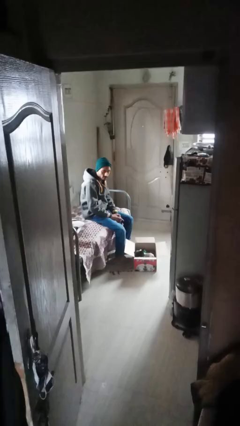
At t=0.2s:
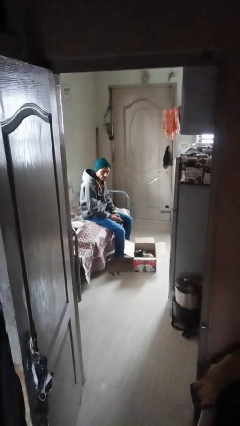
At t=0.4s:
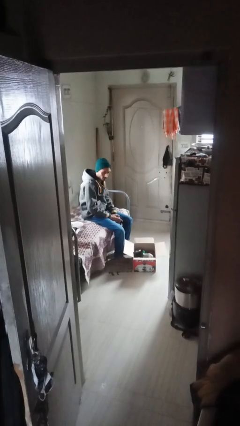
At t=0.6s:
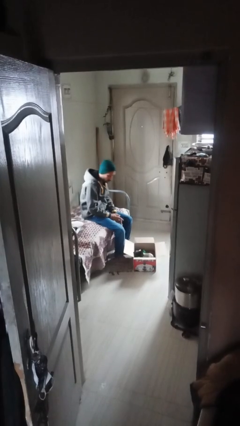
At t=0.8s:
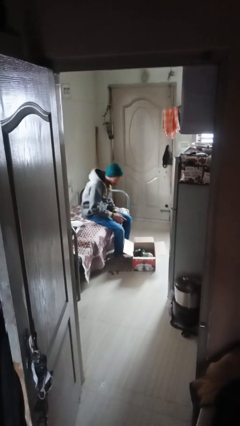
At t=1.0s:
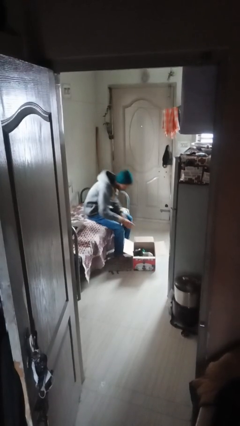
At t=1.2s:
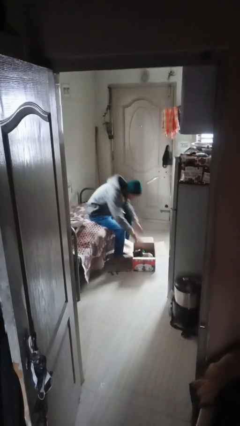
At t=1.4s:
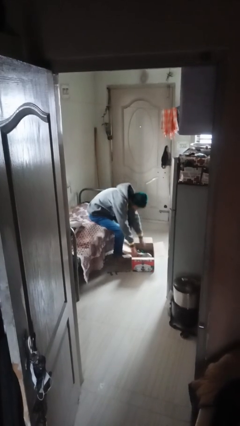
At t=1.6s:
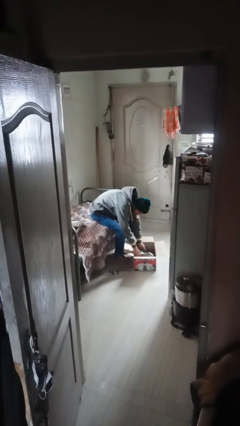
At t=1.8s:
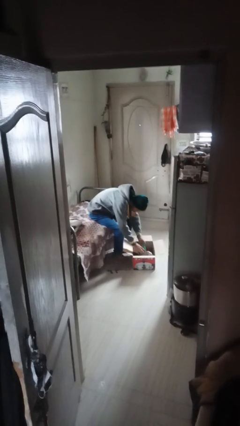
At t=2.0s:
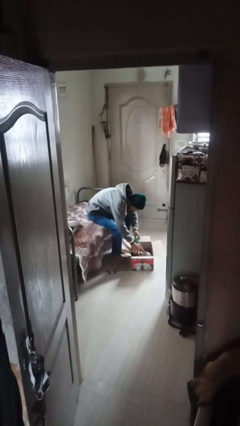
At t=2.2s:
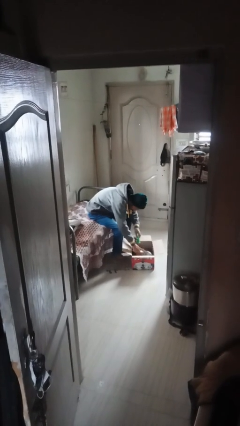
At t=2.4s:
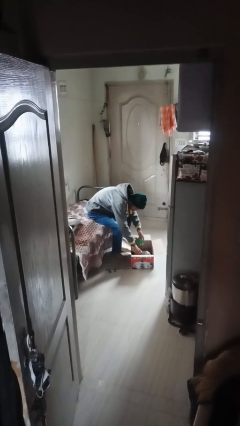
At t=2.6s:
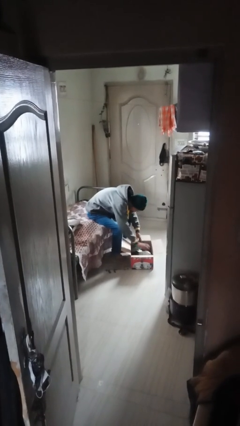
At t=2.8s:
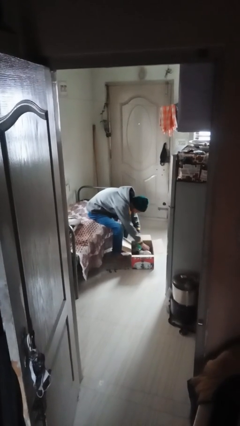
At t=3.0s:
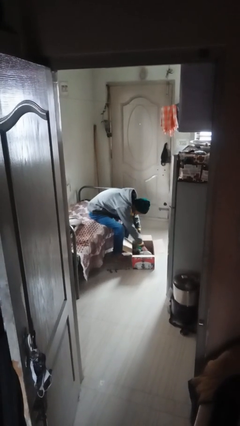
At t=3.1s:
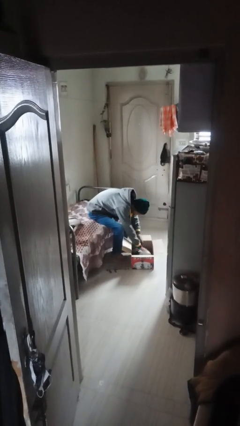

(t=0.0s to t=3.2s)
person searches in box

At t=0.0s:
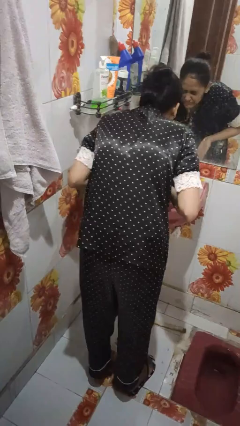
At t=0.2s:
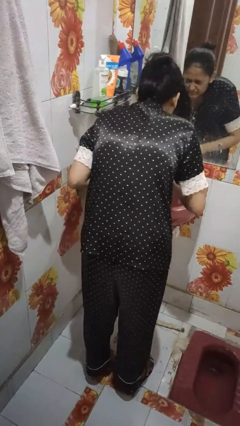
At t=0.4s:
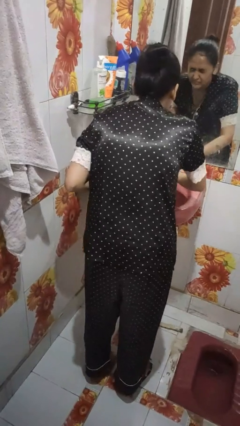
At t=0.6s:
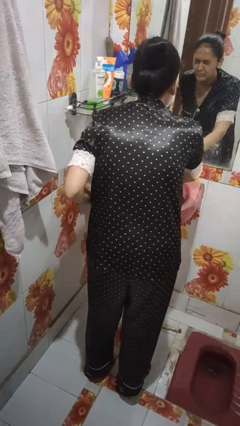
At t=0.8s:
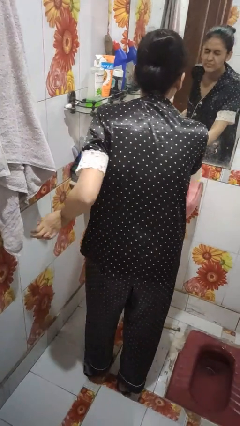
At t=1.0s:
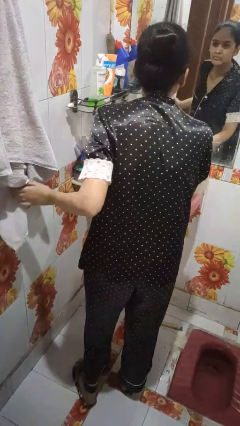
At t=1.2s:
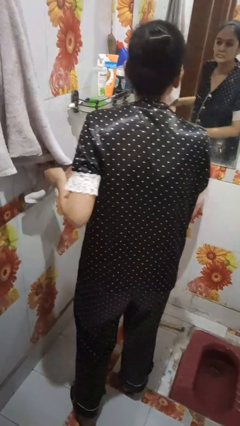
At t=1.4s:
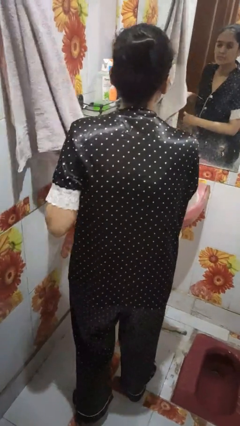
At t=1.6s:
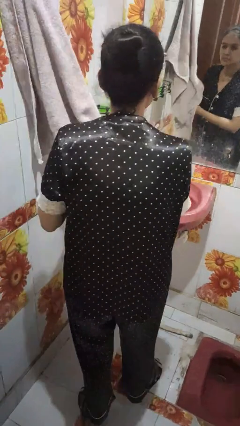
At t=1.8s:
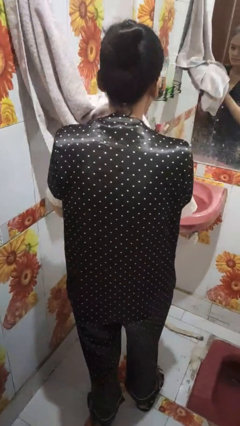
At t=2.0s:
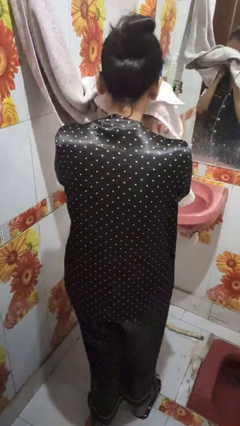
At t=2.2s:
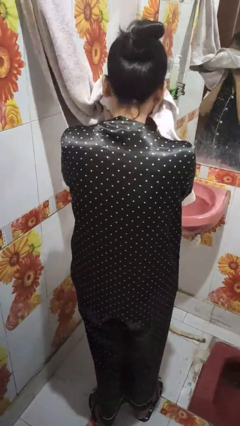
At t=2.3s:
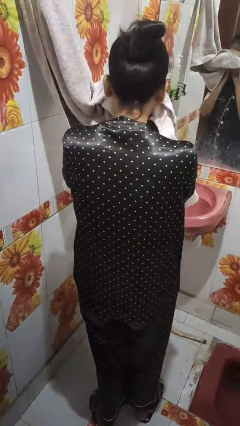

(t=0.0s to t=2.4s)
person washes face

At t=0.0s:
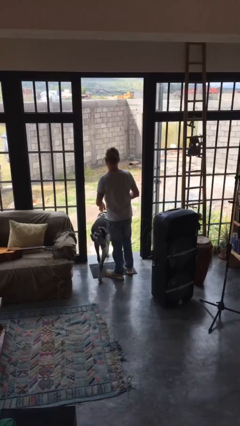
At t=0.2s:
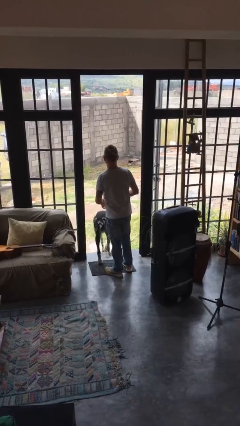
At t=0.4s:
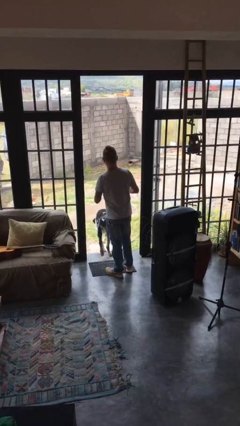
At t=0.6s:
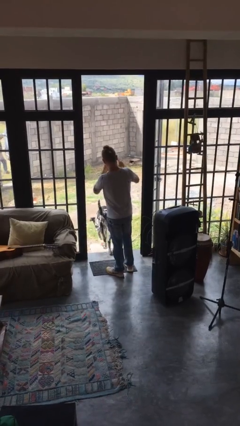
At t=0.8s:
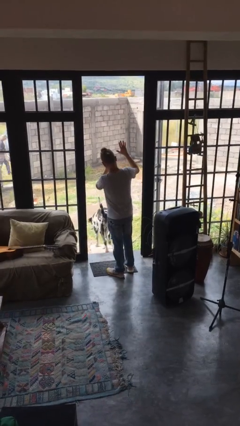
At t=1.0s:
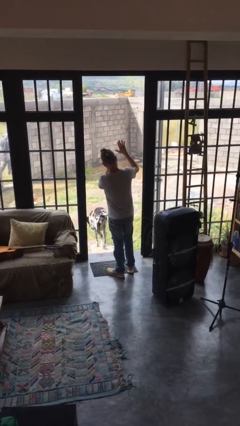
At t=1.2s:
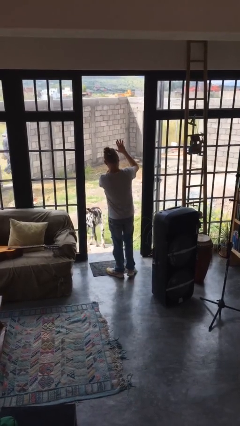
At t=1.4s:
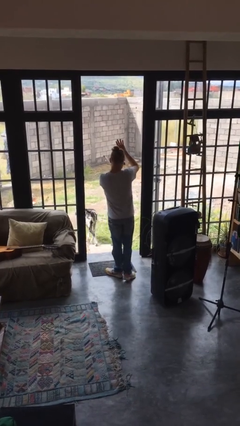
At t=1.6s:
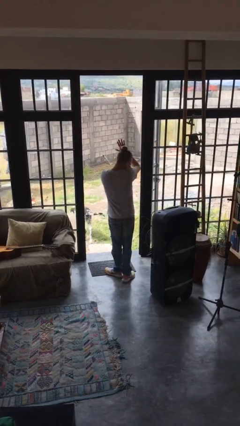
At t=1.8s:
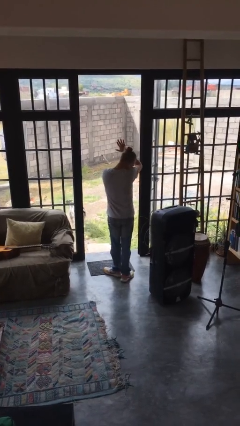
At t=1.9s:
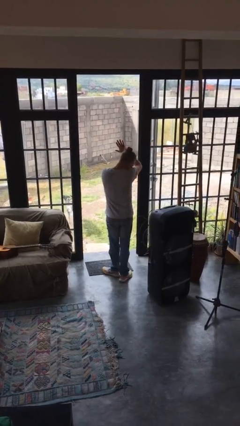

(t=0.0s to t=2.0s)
person shades eyes

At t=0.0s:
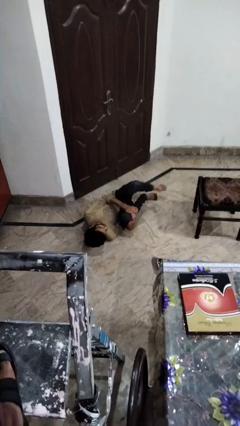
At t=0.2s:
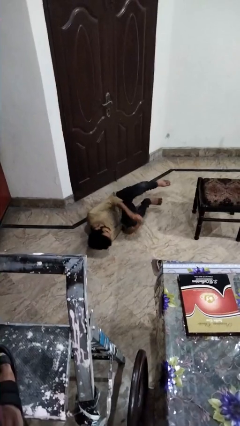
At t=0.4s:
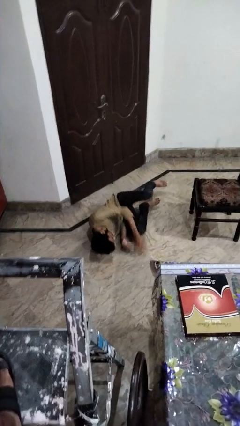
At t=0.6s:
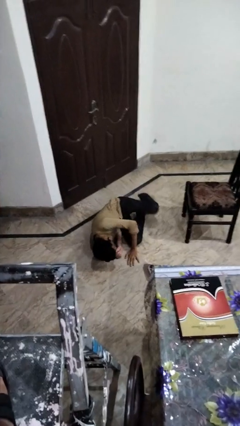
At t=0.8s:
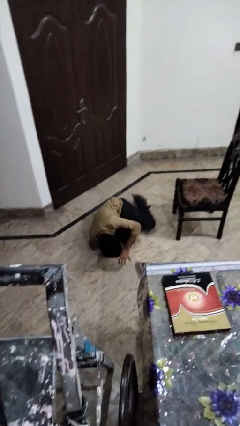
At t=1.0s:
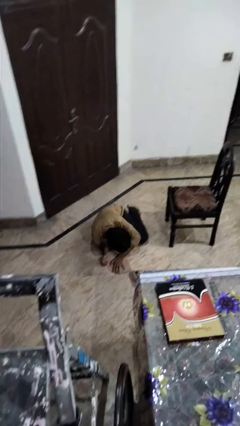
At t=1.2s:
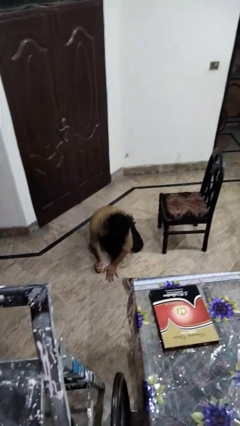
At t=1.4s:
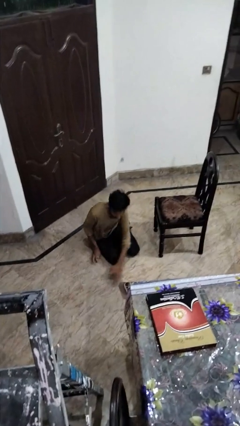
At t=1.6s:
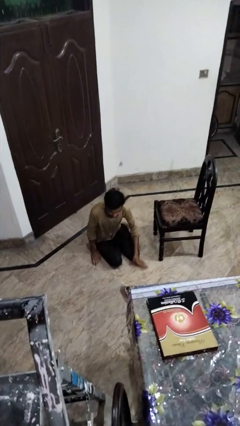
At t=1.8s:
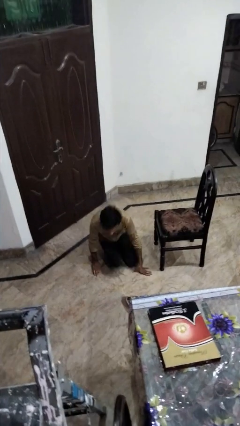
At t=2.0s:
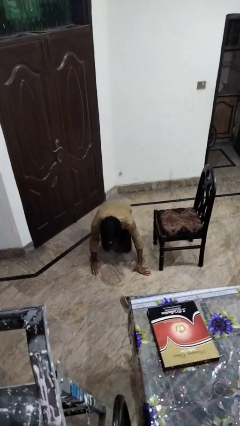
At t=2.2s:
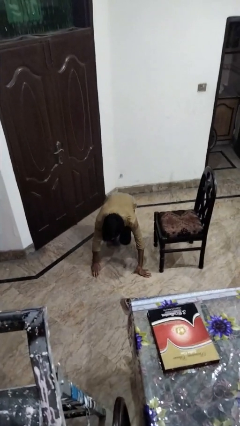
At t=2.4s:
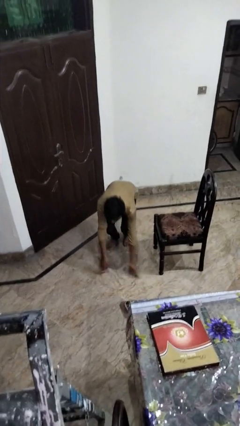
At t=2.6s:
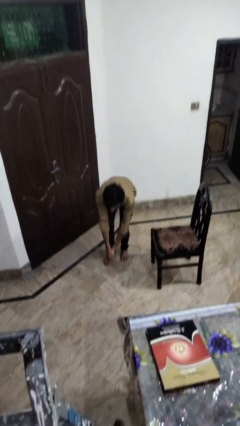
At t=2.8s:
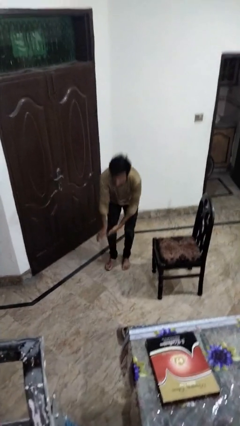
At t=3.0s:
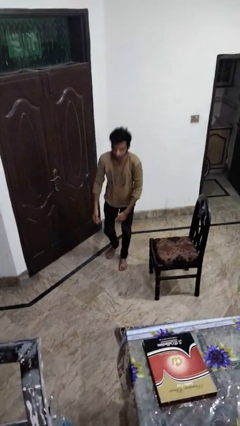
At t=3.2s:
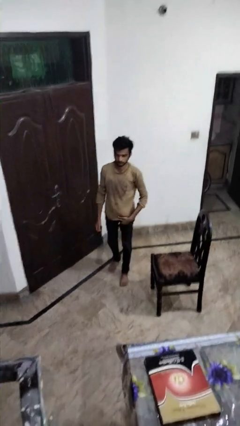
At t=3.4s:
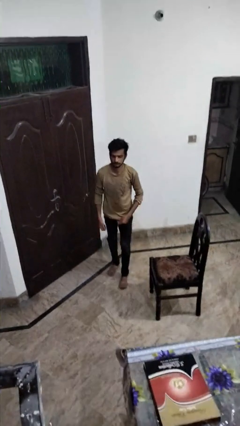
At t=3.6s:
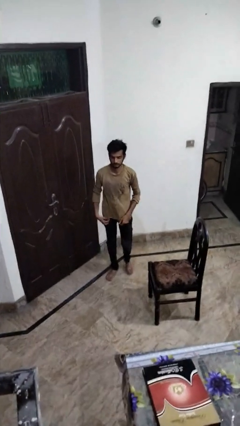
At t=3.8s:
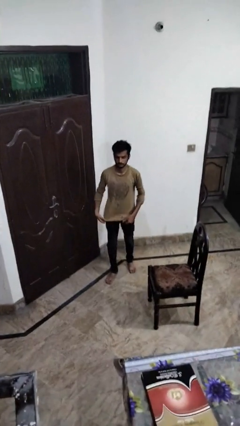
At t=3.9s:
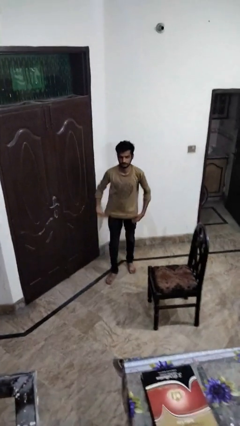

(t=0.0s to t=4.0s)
person stands up from floor

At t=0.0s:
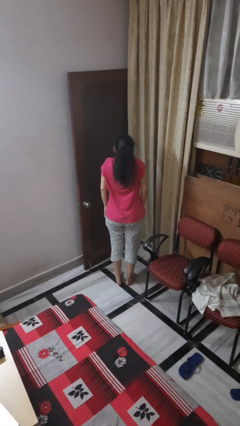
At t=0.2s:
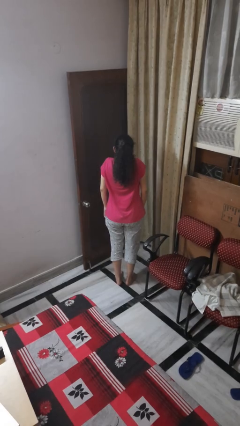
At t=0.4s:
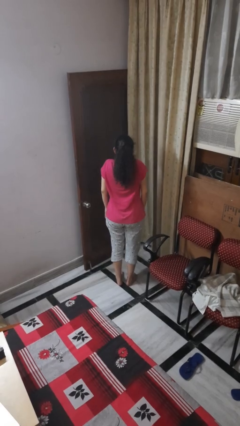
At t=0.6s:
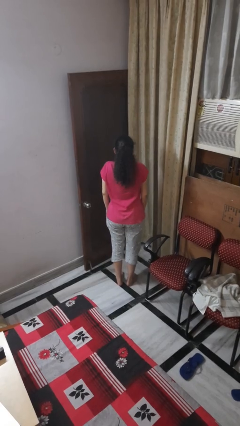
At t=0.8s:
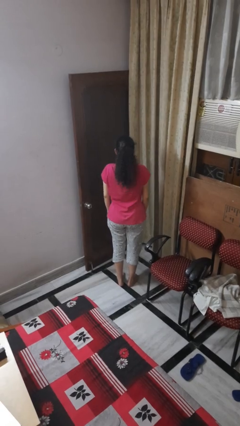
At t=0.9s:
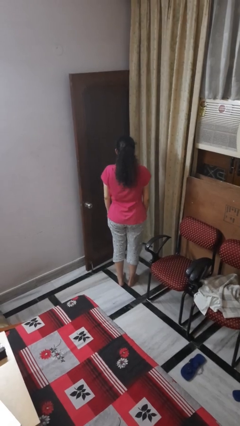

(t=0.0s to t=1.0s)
person shrugs

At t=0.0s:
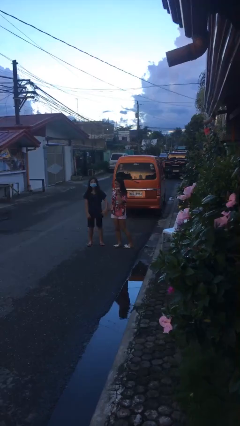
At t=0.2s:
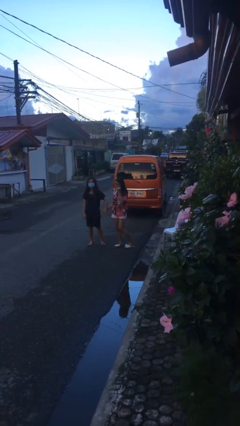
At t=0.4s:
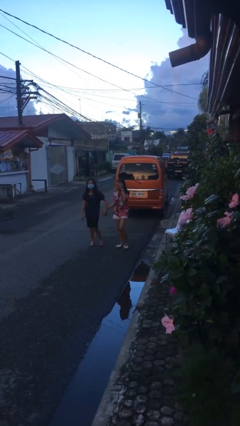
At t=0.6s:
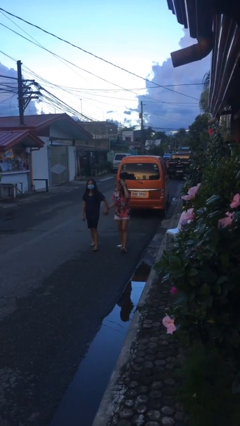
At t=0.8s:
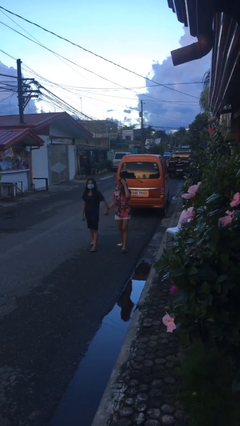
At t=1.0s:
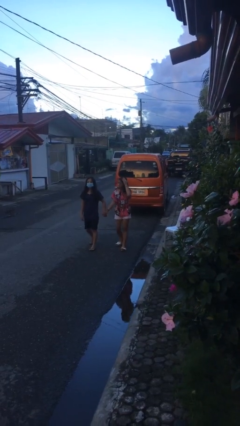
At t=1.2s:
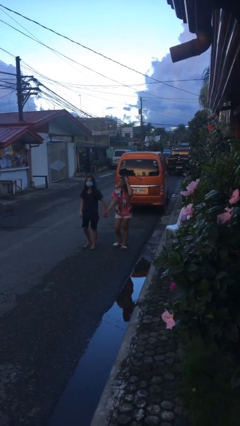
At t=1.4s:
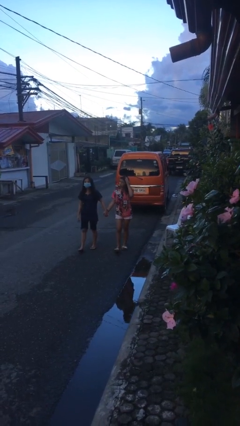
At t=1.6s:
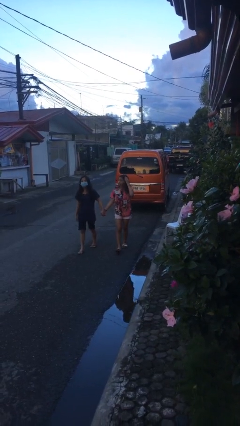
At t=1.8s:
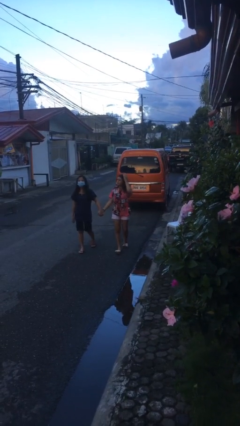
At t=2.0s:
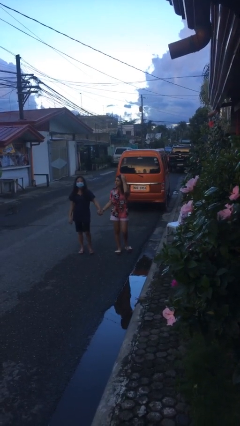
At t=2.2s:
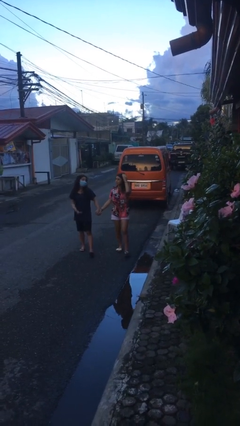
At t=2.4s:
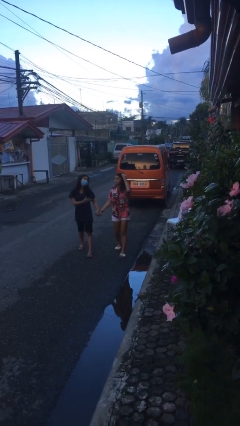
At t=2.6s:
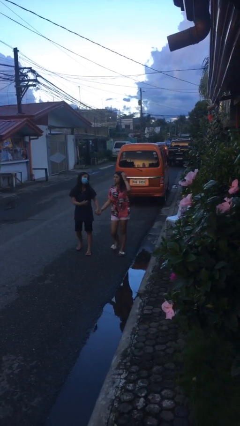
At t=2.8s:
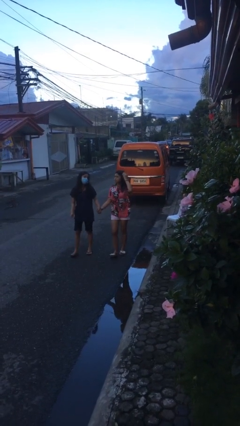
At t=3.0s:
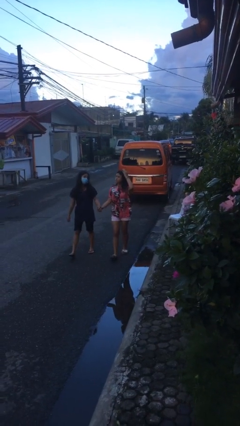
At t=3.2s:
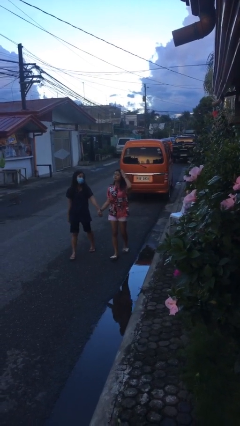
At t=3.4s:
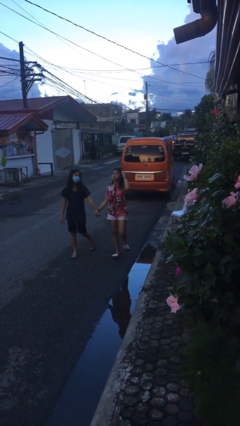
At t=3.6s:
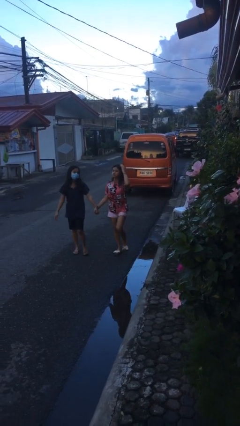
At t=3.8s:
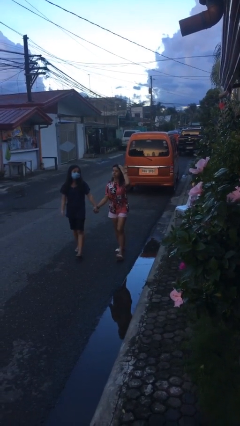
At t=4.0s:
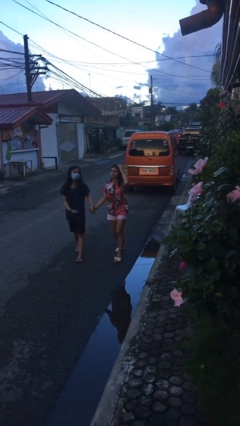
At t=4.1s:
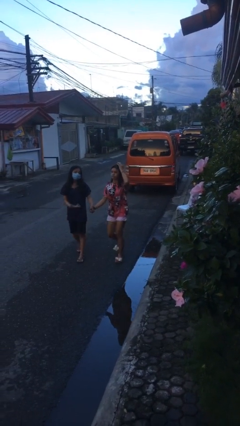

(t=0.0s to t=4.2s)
person holds hand

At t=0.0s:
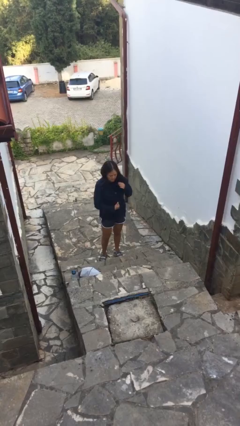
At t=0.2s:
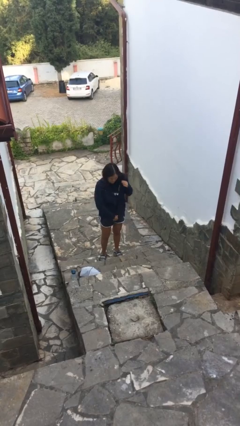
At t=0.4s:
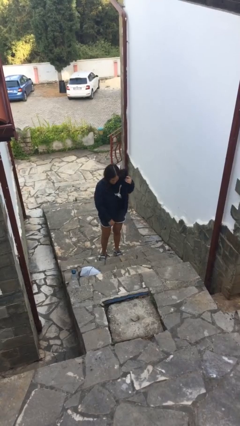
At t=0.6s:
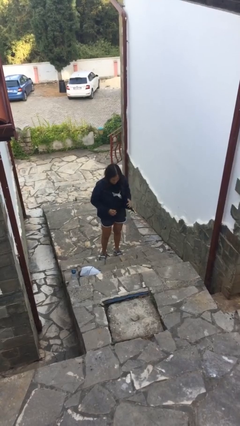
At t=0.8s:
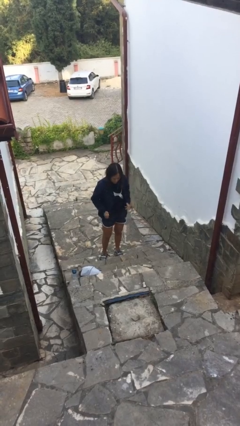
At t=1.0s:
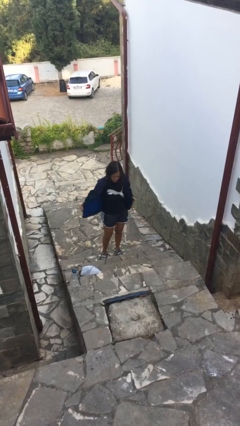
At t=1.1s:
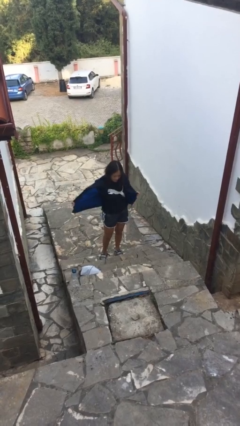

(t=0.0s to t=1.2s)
person unzips jacket
